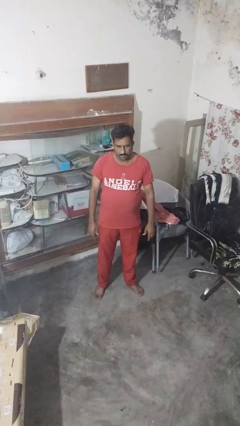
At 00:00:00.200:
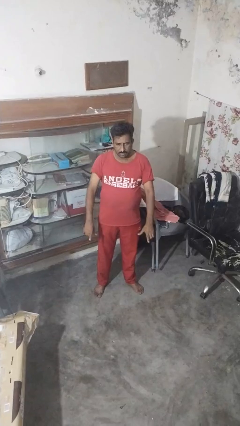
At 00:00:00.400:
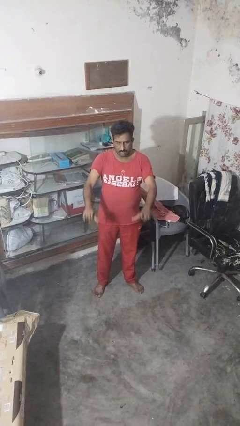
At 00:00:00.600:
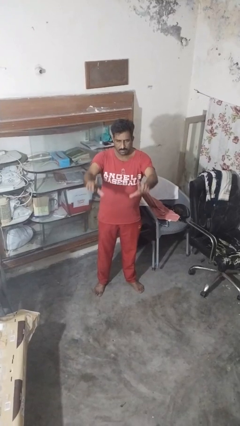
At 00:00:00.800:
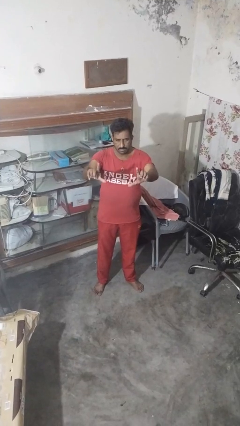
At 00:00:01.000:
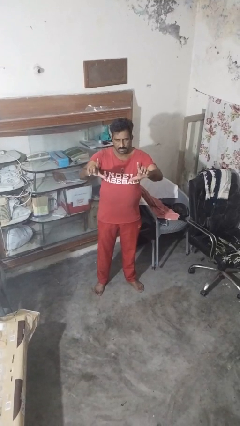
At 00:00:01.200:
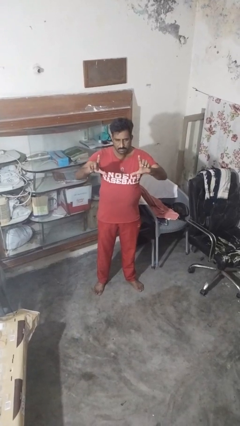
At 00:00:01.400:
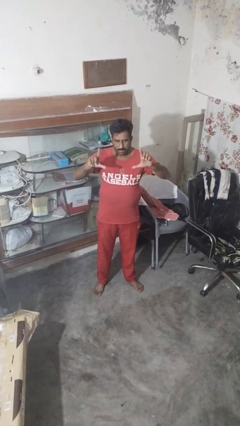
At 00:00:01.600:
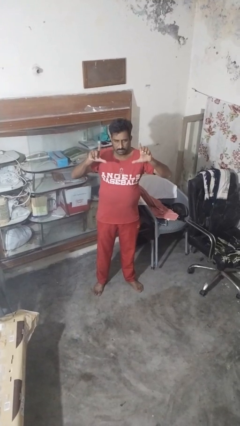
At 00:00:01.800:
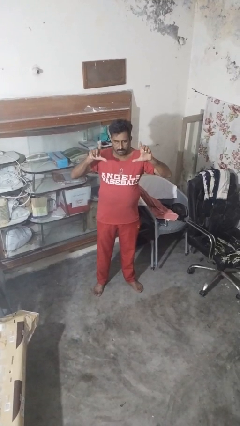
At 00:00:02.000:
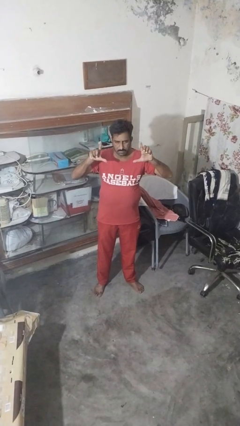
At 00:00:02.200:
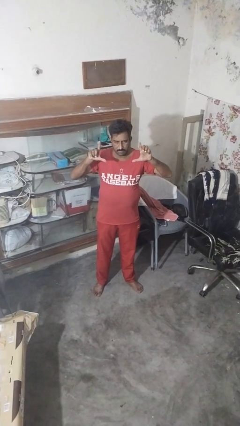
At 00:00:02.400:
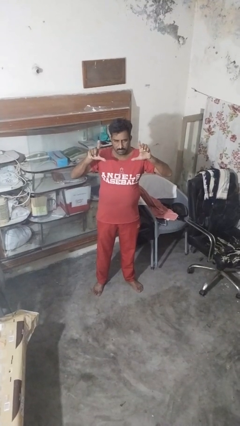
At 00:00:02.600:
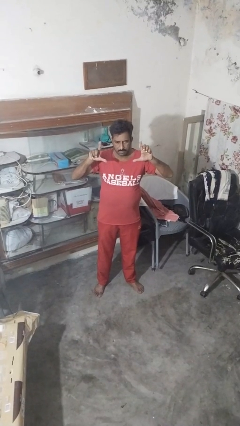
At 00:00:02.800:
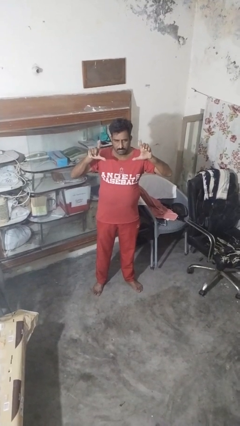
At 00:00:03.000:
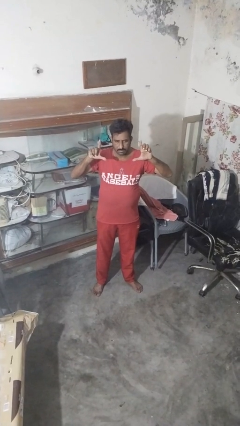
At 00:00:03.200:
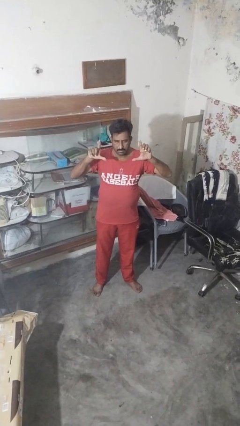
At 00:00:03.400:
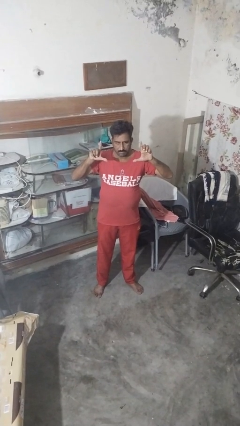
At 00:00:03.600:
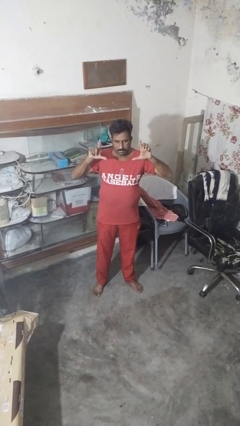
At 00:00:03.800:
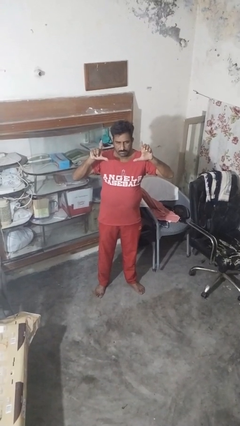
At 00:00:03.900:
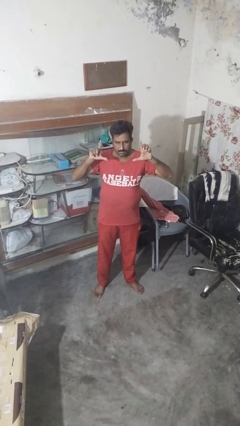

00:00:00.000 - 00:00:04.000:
person gestures zoom in

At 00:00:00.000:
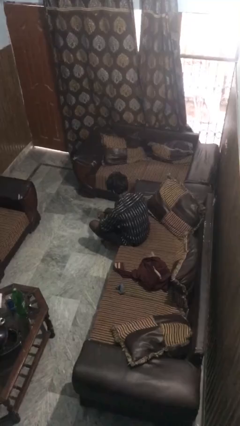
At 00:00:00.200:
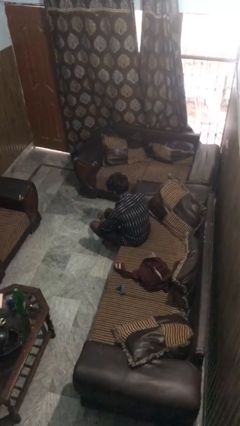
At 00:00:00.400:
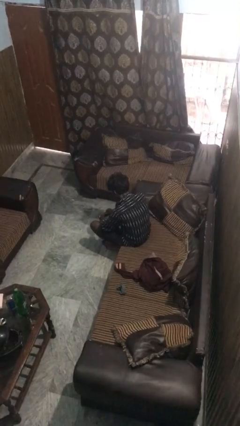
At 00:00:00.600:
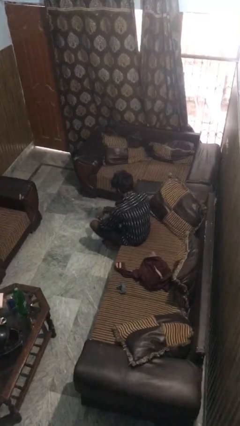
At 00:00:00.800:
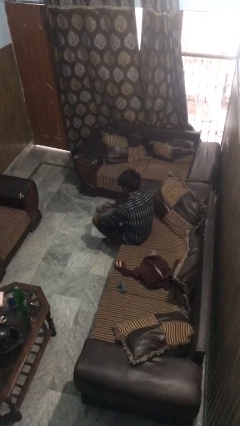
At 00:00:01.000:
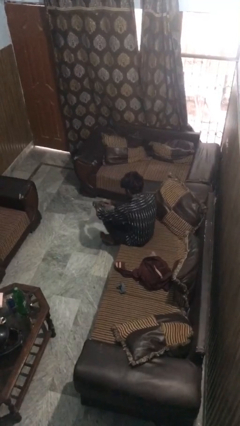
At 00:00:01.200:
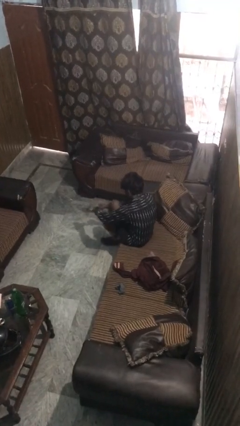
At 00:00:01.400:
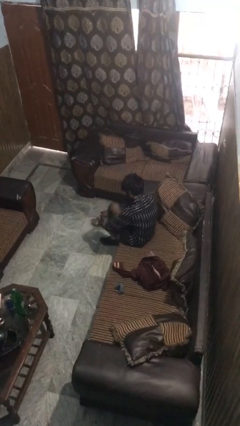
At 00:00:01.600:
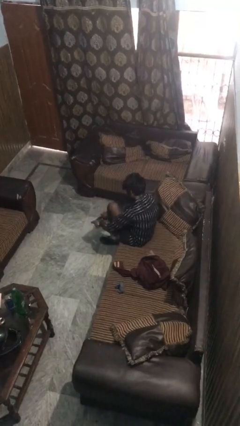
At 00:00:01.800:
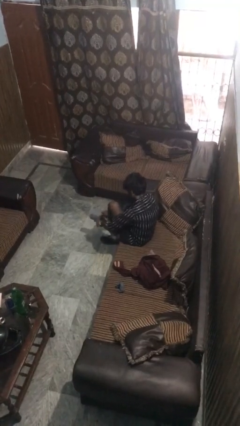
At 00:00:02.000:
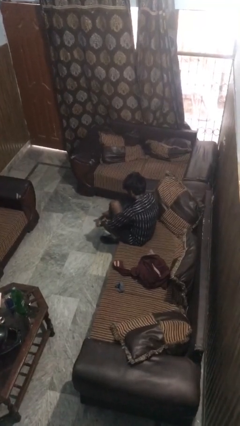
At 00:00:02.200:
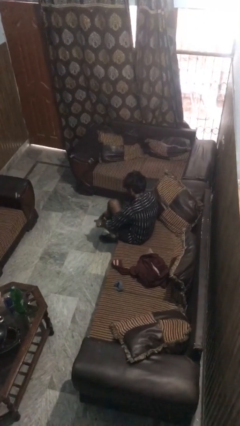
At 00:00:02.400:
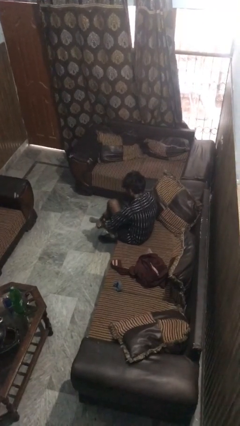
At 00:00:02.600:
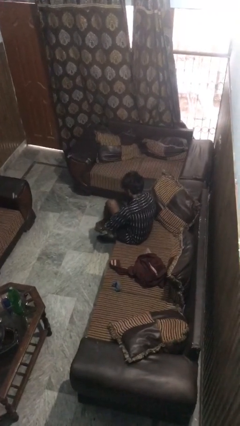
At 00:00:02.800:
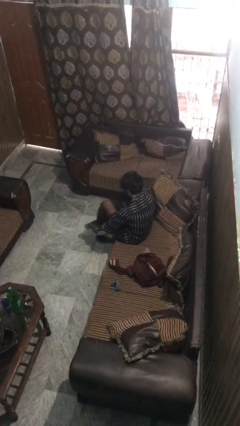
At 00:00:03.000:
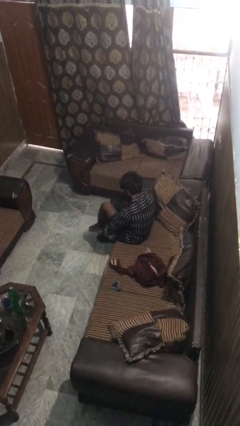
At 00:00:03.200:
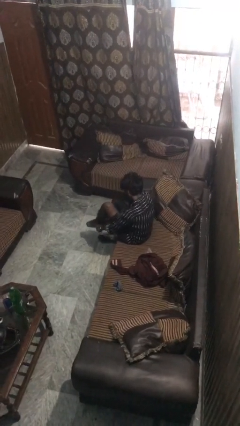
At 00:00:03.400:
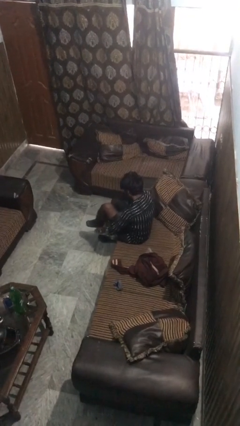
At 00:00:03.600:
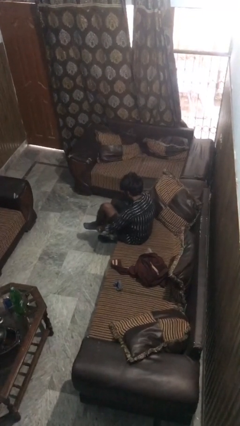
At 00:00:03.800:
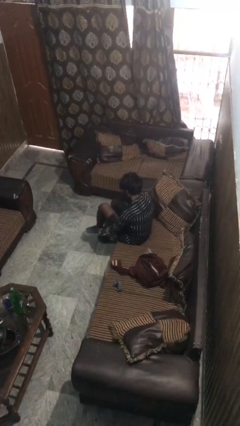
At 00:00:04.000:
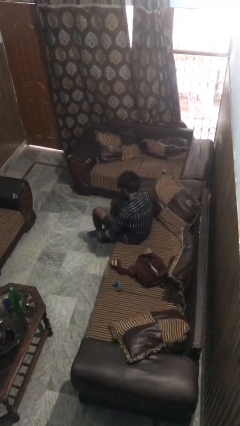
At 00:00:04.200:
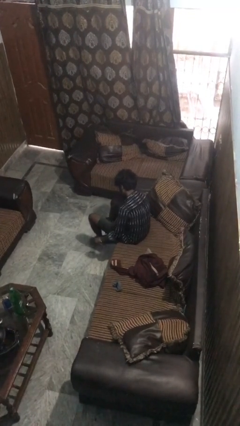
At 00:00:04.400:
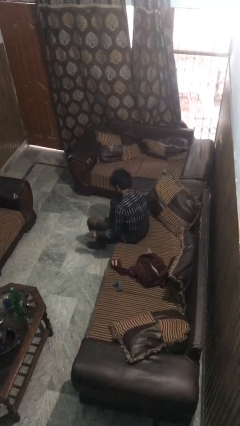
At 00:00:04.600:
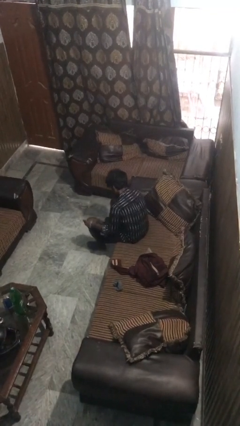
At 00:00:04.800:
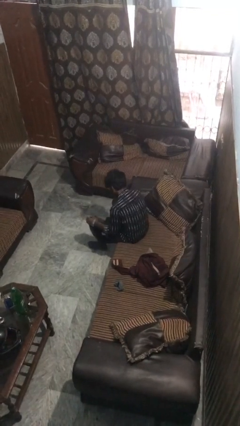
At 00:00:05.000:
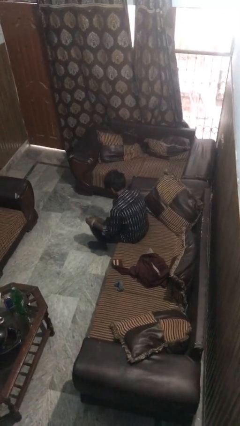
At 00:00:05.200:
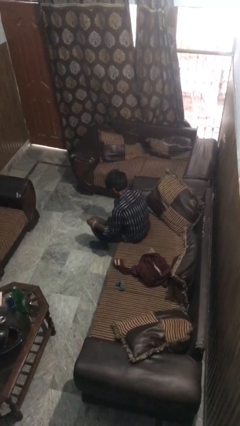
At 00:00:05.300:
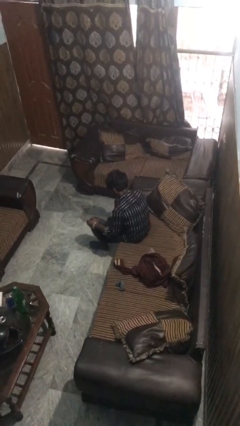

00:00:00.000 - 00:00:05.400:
person puts on socks

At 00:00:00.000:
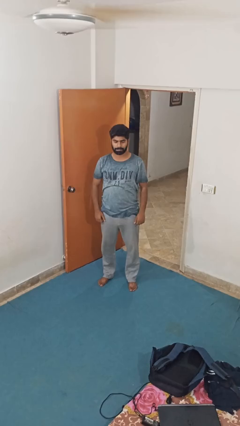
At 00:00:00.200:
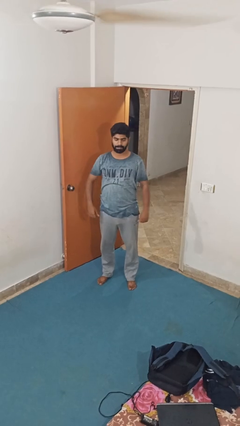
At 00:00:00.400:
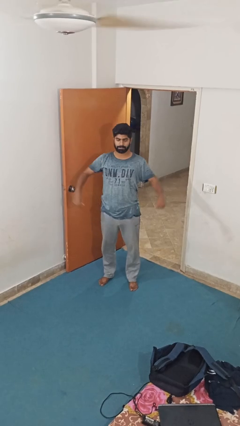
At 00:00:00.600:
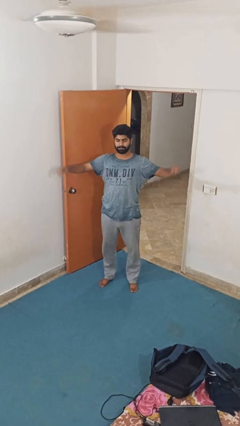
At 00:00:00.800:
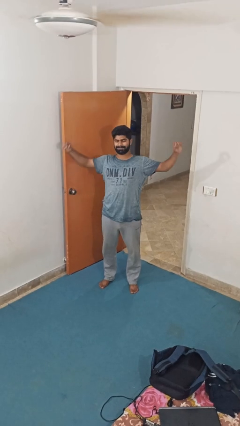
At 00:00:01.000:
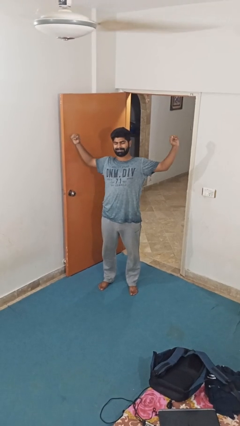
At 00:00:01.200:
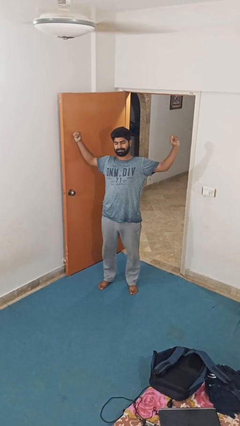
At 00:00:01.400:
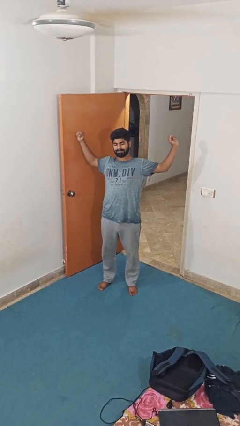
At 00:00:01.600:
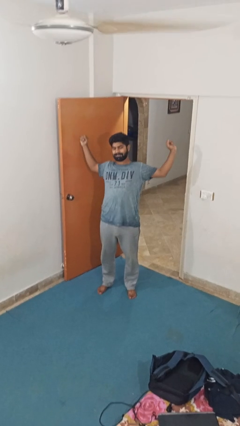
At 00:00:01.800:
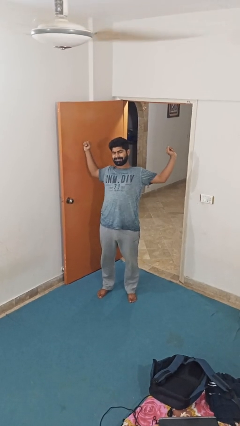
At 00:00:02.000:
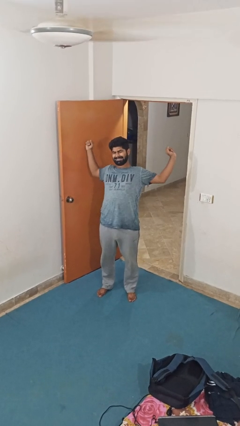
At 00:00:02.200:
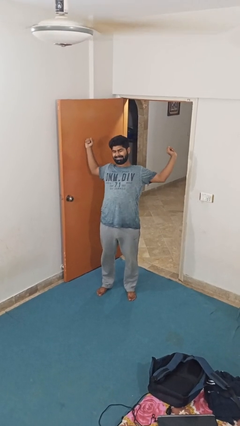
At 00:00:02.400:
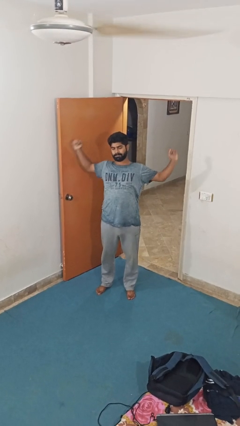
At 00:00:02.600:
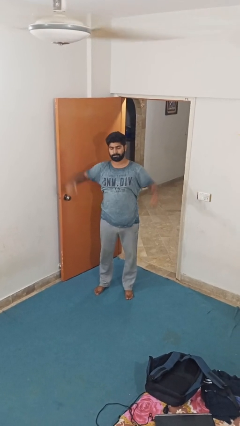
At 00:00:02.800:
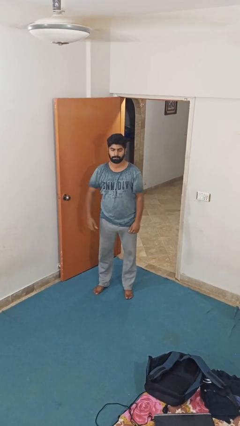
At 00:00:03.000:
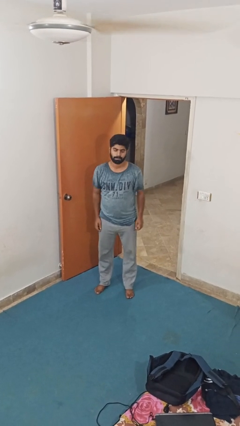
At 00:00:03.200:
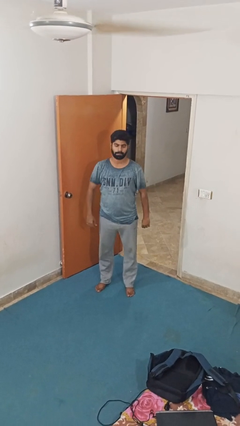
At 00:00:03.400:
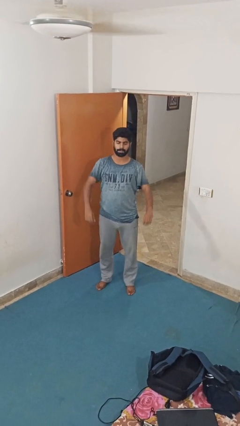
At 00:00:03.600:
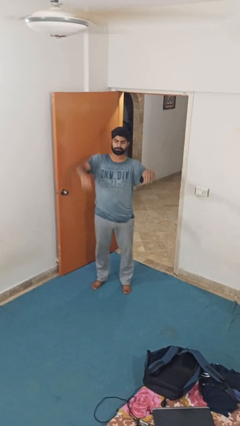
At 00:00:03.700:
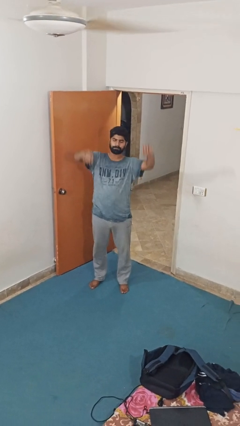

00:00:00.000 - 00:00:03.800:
person stretches arms to side

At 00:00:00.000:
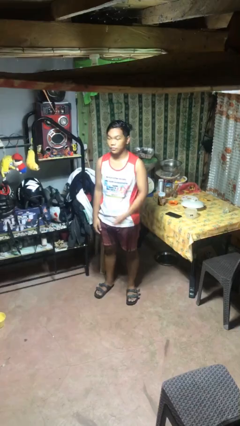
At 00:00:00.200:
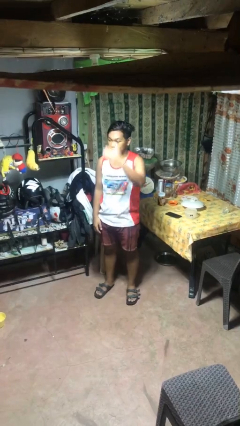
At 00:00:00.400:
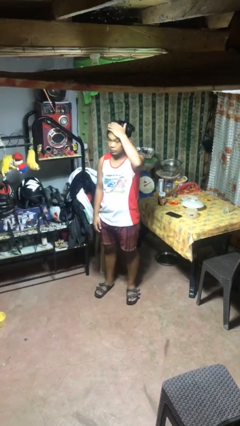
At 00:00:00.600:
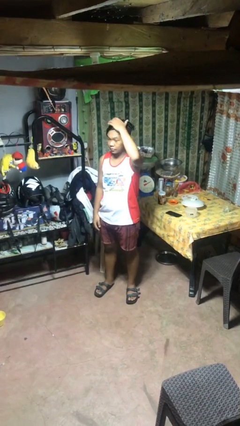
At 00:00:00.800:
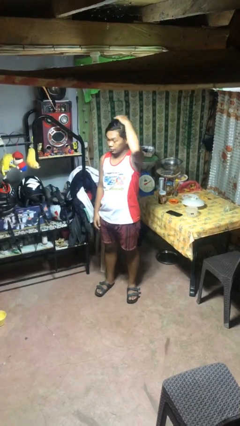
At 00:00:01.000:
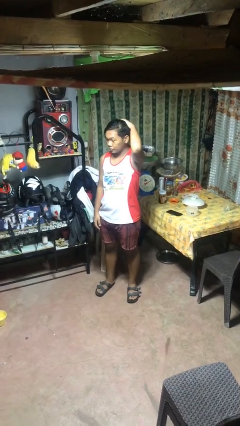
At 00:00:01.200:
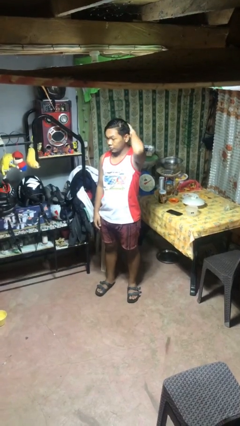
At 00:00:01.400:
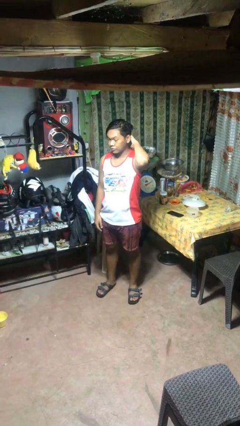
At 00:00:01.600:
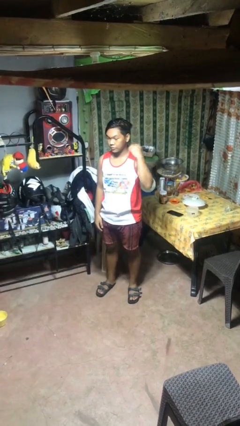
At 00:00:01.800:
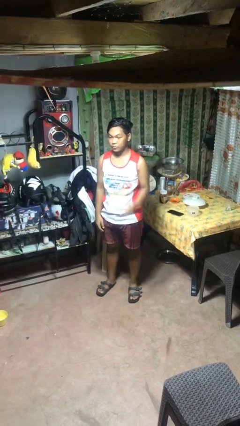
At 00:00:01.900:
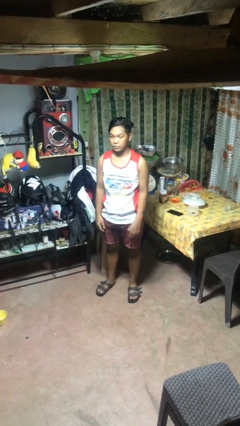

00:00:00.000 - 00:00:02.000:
person pats head

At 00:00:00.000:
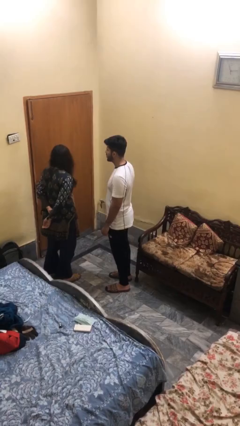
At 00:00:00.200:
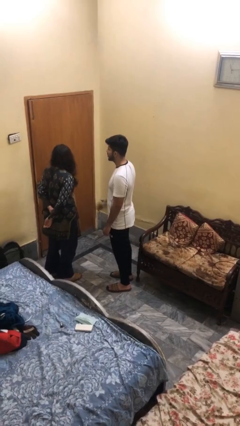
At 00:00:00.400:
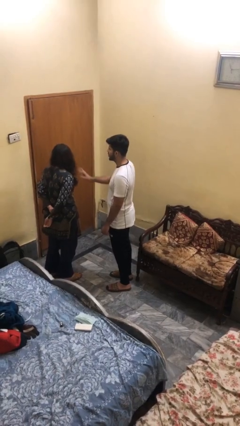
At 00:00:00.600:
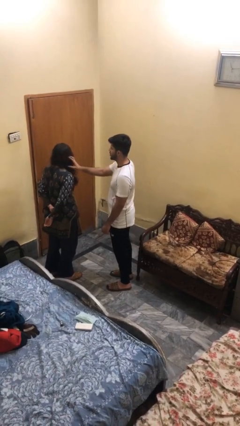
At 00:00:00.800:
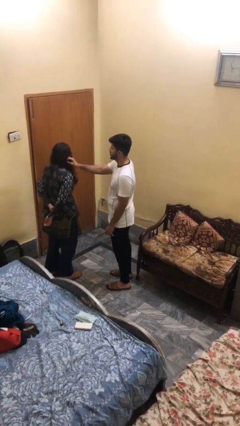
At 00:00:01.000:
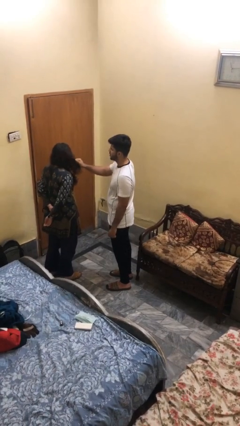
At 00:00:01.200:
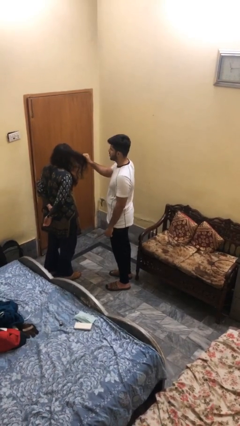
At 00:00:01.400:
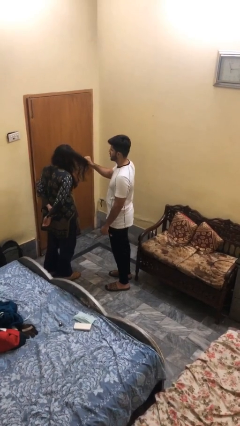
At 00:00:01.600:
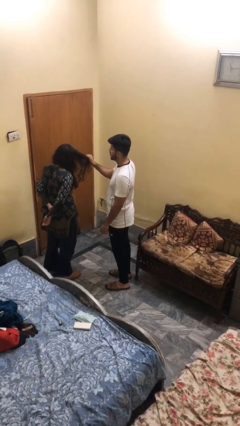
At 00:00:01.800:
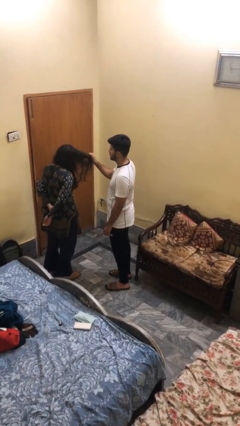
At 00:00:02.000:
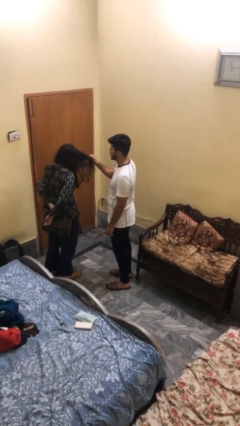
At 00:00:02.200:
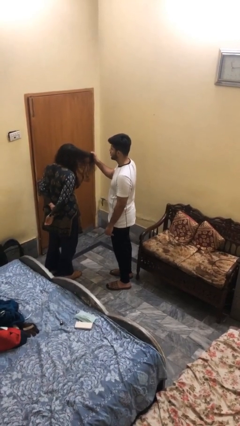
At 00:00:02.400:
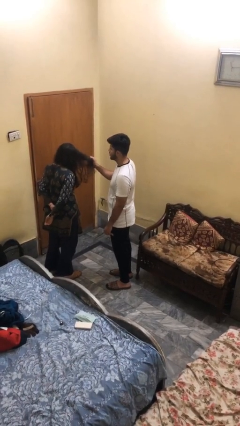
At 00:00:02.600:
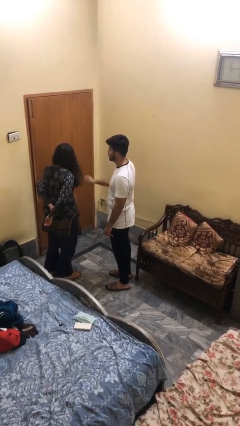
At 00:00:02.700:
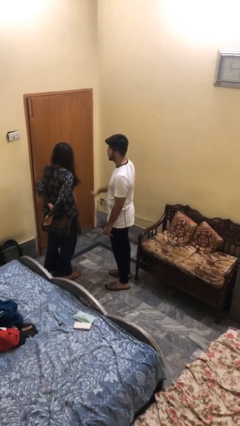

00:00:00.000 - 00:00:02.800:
person grabs person by hair
